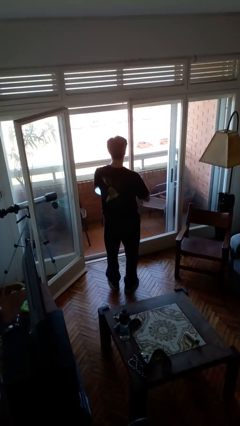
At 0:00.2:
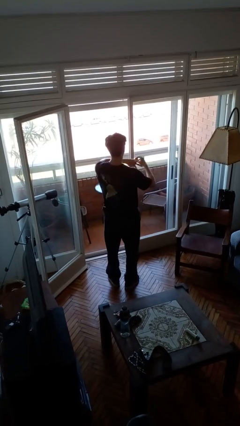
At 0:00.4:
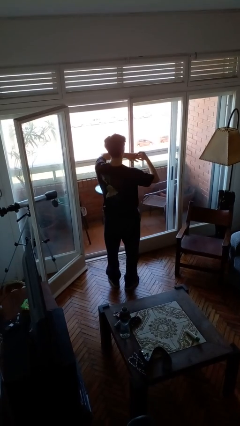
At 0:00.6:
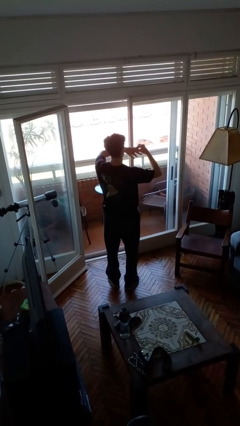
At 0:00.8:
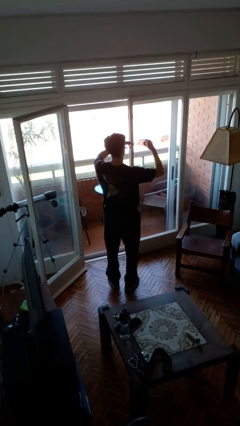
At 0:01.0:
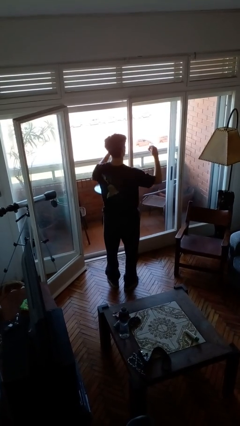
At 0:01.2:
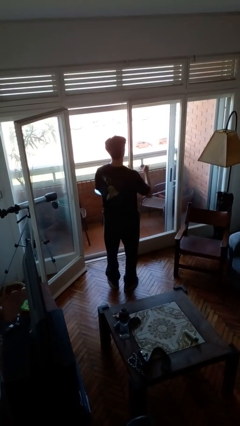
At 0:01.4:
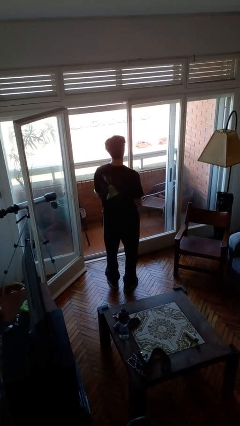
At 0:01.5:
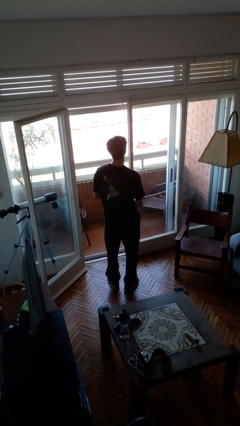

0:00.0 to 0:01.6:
person takes off ring

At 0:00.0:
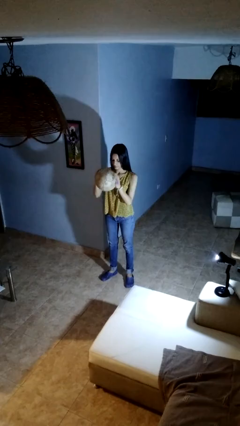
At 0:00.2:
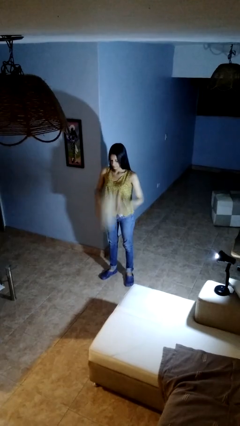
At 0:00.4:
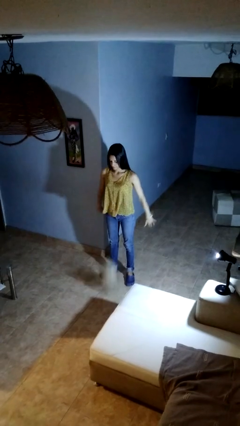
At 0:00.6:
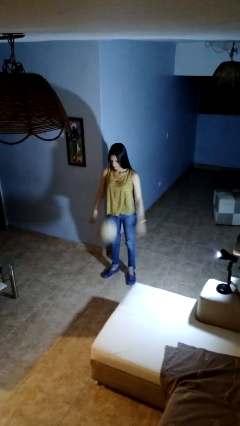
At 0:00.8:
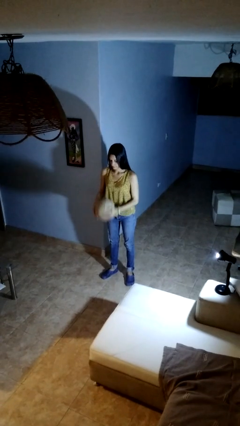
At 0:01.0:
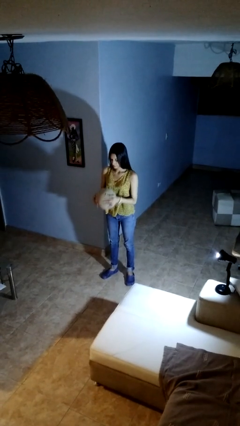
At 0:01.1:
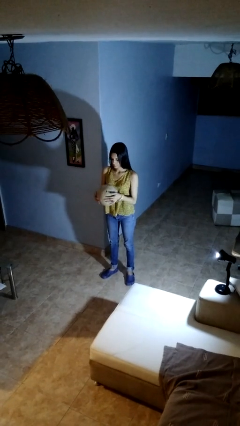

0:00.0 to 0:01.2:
person bounces ball on floor

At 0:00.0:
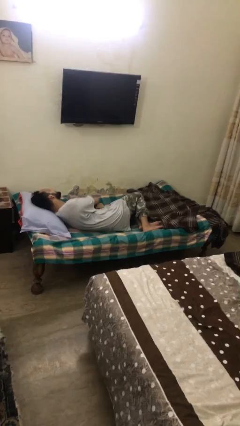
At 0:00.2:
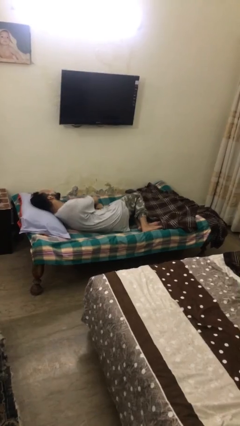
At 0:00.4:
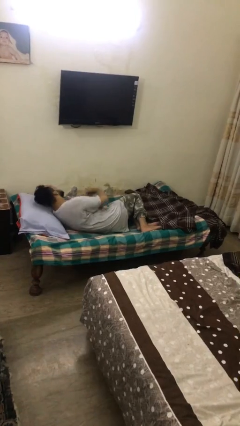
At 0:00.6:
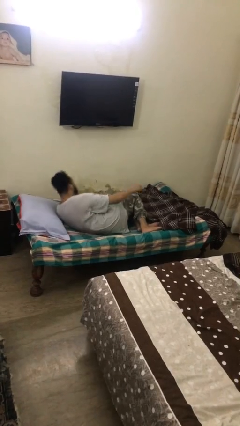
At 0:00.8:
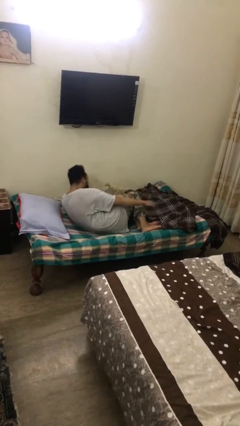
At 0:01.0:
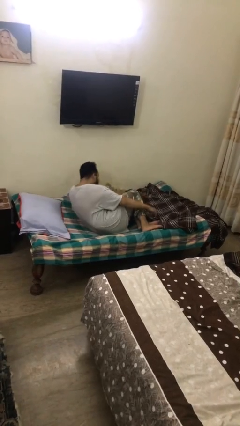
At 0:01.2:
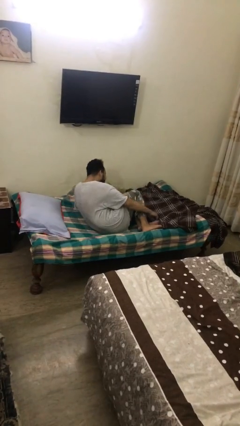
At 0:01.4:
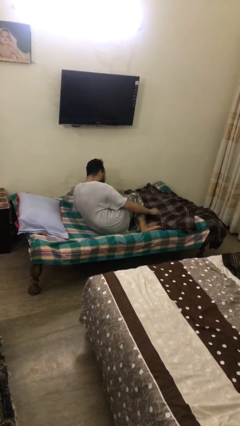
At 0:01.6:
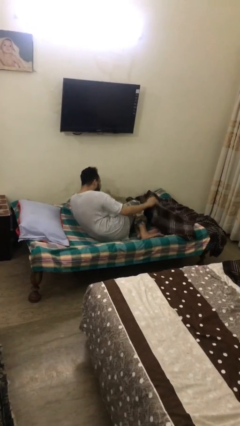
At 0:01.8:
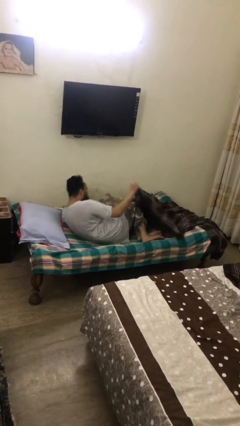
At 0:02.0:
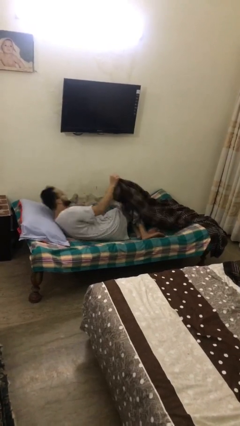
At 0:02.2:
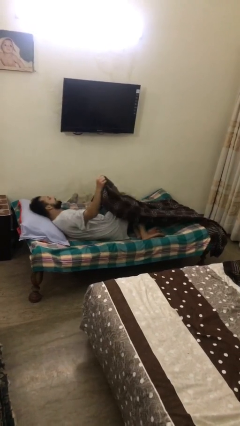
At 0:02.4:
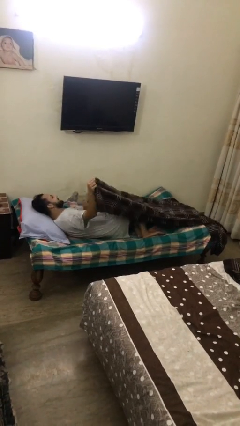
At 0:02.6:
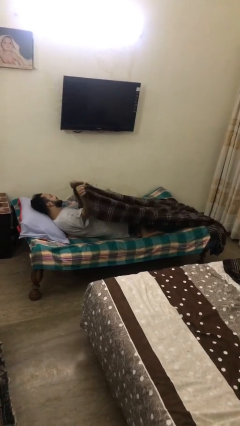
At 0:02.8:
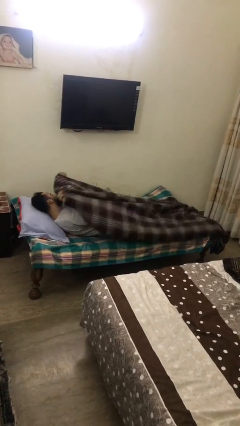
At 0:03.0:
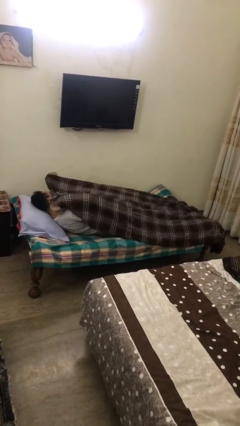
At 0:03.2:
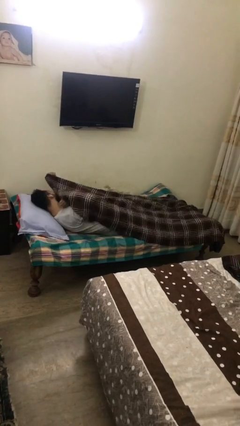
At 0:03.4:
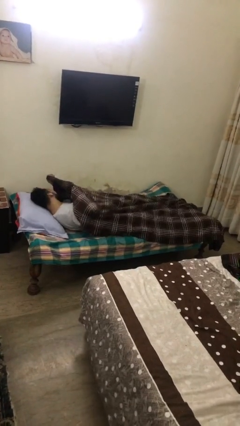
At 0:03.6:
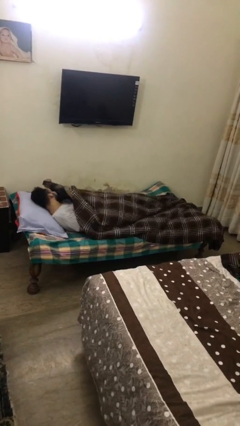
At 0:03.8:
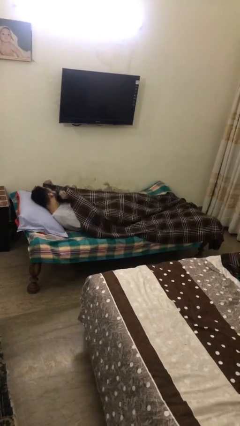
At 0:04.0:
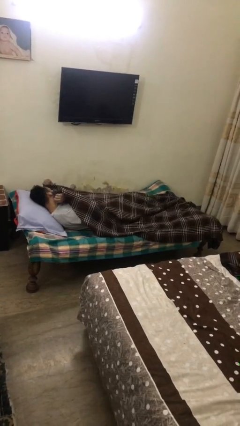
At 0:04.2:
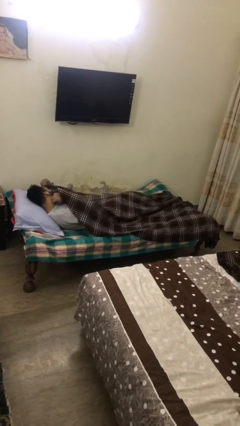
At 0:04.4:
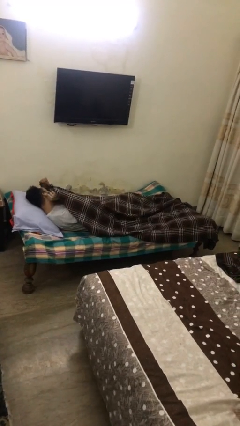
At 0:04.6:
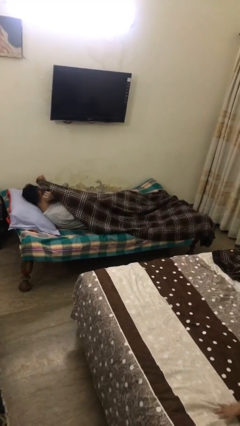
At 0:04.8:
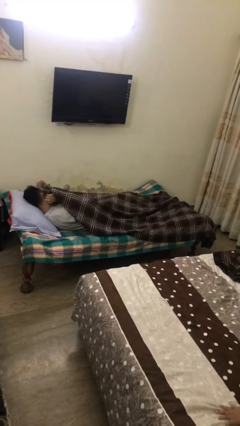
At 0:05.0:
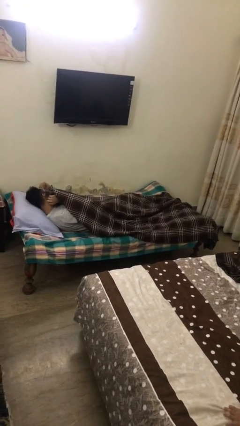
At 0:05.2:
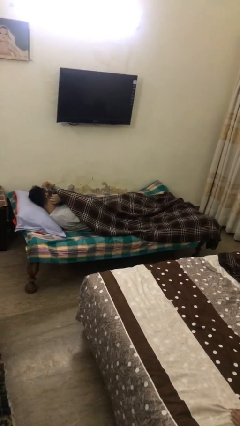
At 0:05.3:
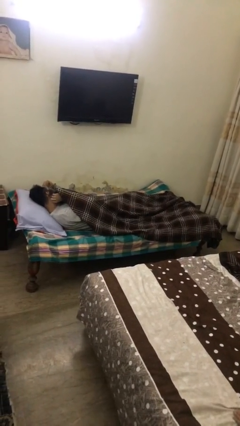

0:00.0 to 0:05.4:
person covers with blanket

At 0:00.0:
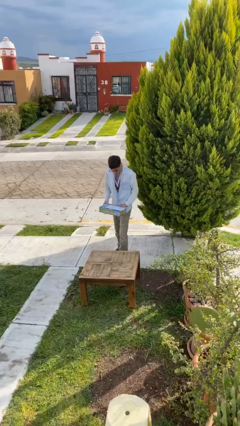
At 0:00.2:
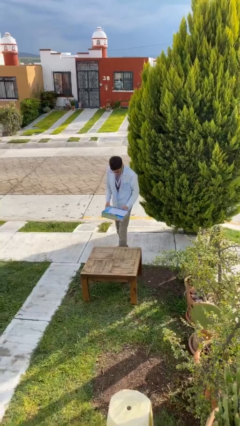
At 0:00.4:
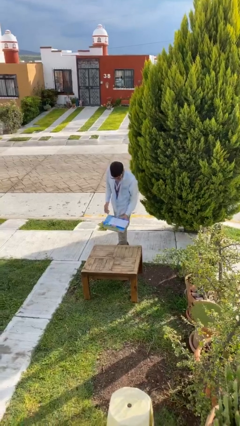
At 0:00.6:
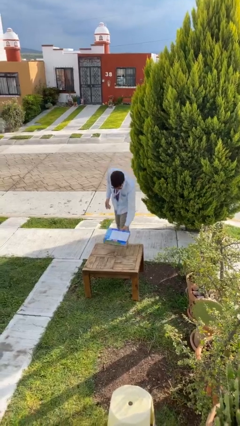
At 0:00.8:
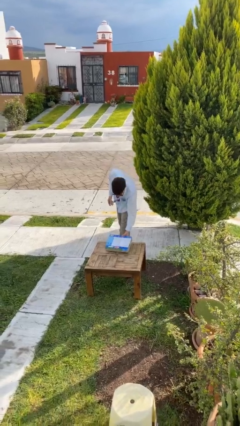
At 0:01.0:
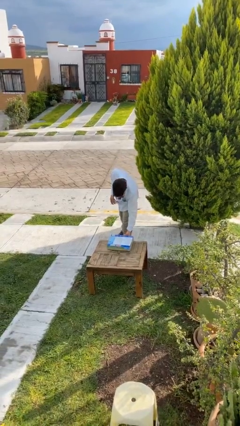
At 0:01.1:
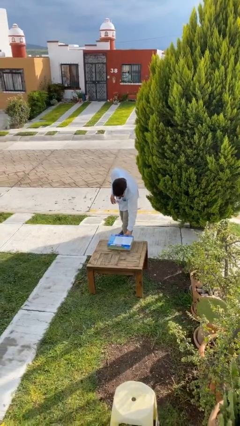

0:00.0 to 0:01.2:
person puts down object on table

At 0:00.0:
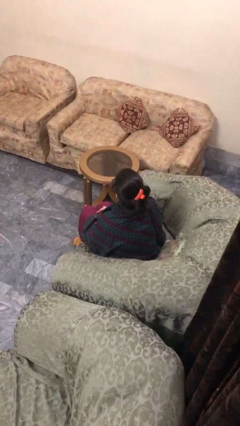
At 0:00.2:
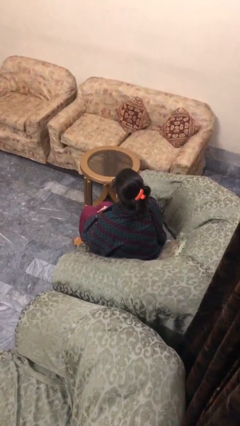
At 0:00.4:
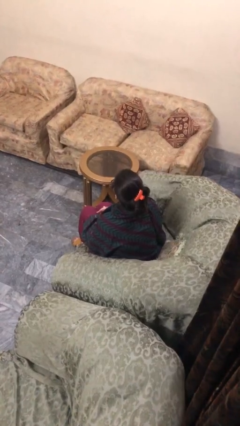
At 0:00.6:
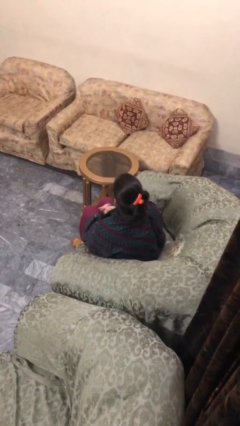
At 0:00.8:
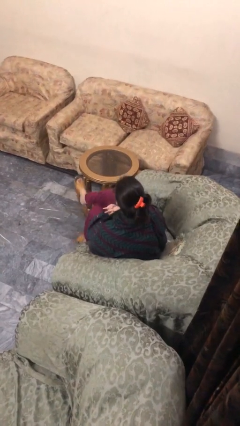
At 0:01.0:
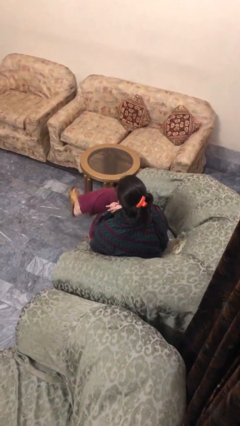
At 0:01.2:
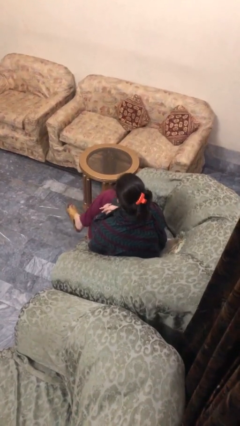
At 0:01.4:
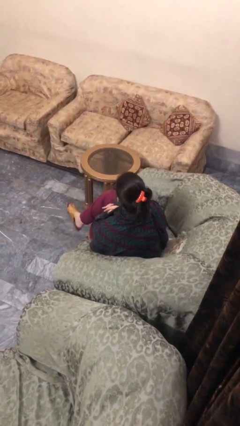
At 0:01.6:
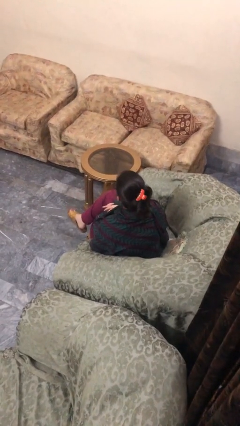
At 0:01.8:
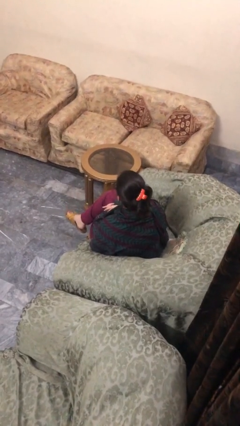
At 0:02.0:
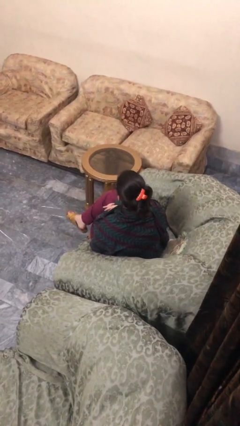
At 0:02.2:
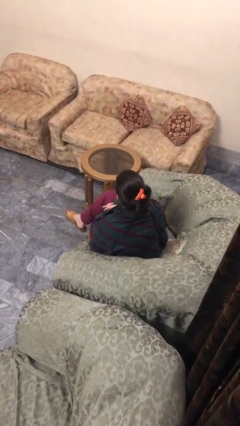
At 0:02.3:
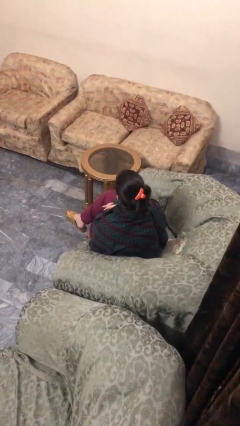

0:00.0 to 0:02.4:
person crosses legs

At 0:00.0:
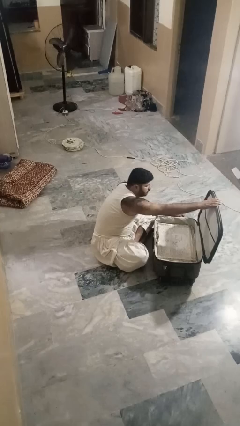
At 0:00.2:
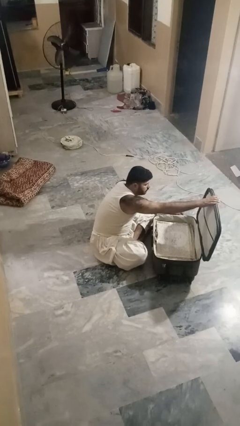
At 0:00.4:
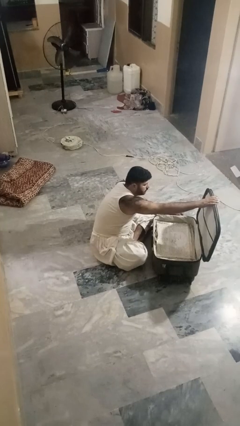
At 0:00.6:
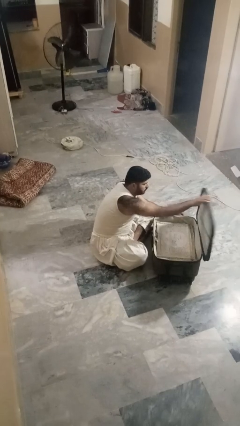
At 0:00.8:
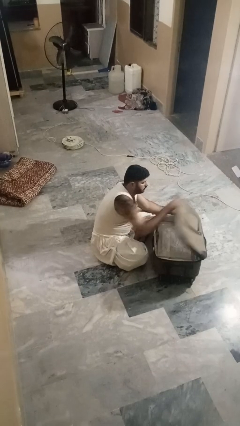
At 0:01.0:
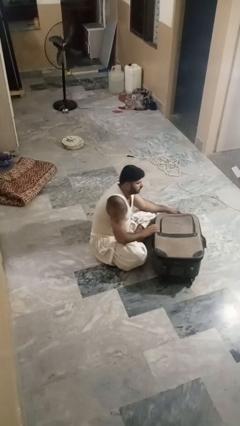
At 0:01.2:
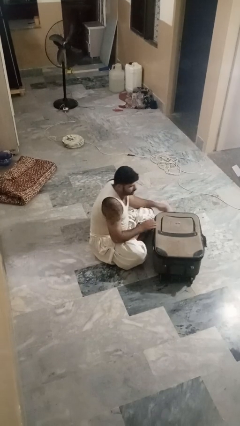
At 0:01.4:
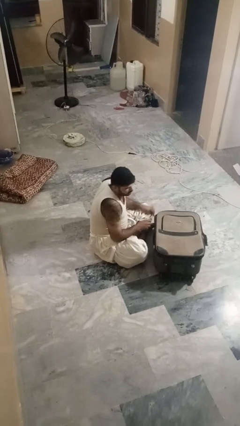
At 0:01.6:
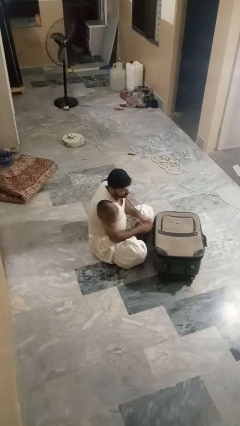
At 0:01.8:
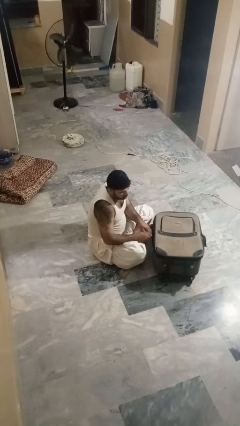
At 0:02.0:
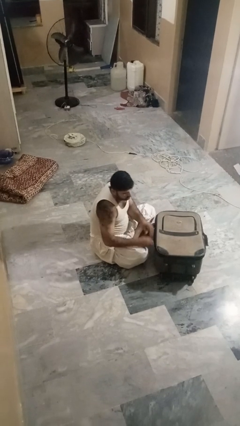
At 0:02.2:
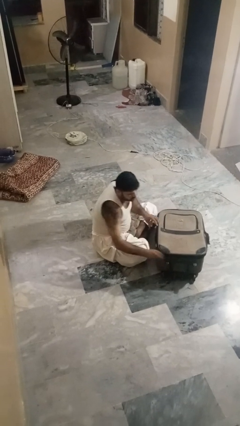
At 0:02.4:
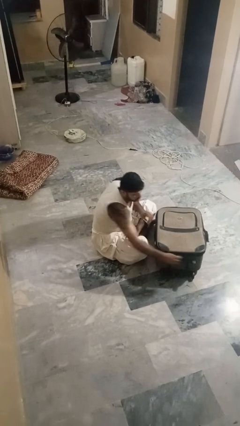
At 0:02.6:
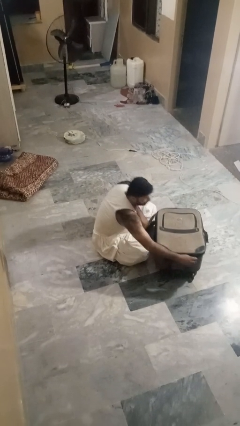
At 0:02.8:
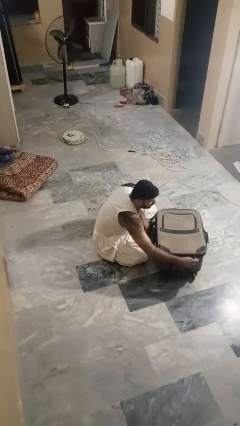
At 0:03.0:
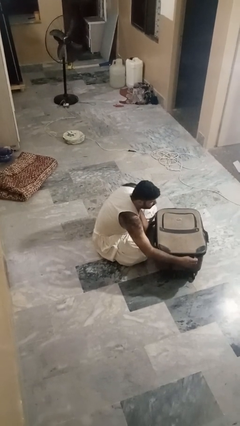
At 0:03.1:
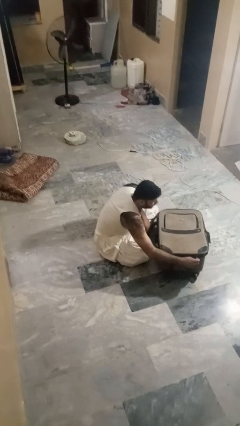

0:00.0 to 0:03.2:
person closes suitcase

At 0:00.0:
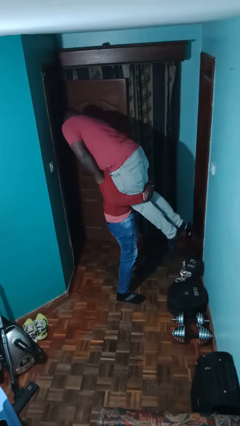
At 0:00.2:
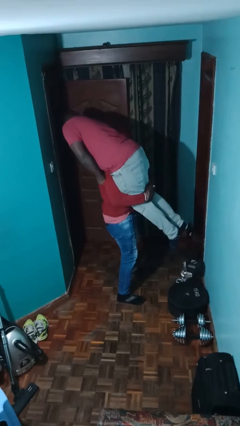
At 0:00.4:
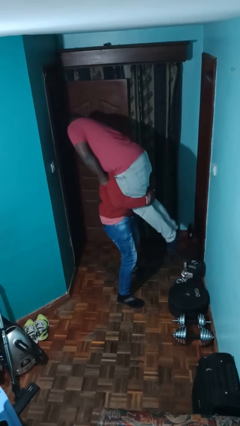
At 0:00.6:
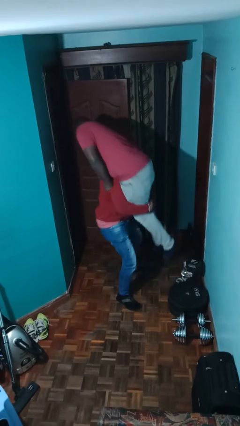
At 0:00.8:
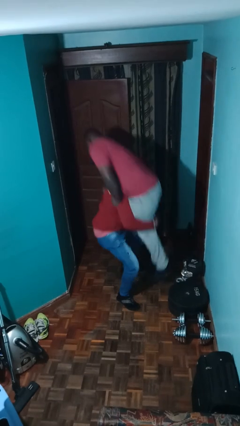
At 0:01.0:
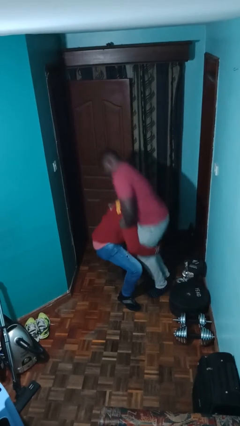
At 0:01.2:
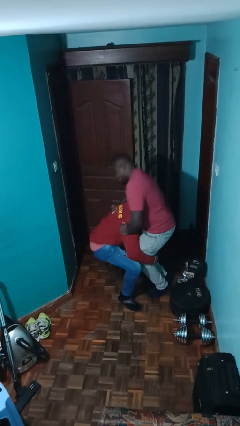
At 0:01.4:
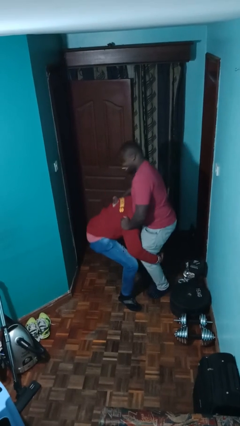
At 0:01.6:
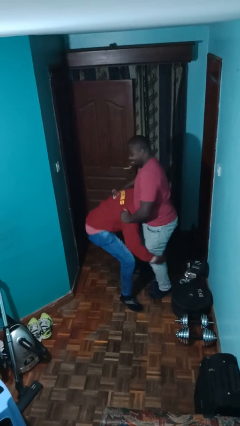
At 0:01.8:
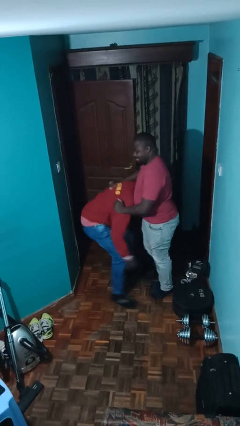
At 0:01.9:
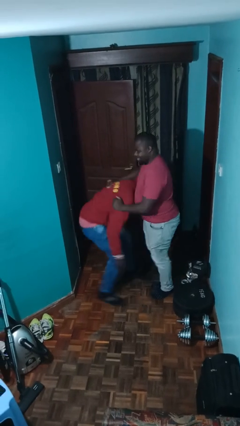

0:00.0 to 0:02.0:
person puts down person

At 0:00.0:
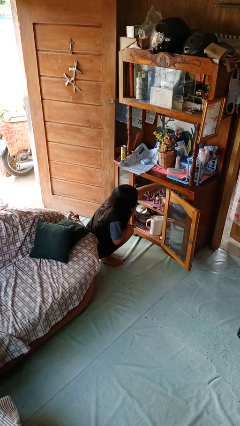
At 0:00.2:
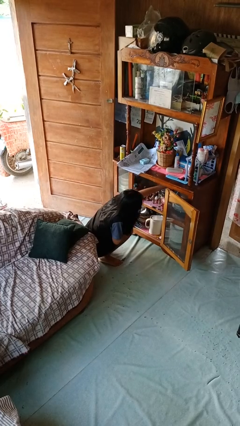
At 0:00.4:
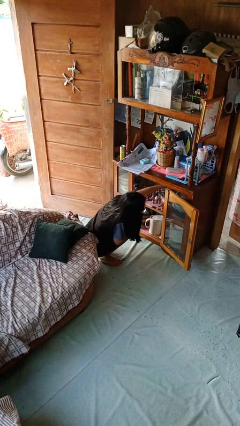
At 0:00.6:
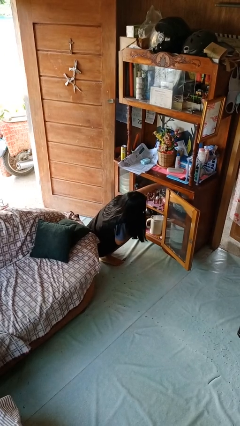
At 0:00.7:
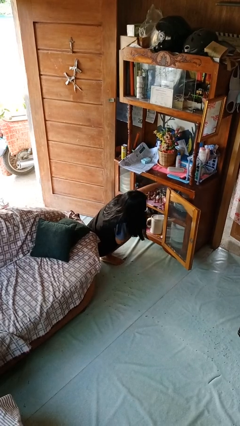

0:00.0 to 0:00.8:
person searches in cabinet
